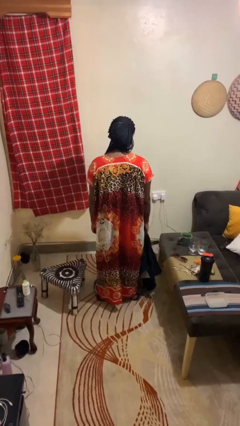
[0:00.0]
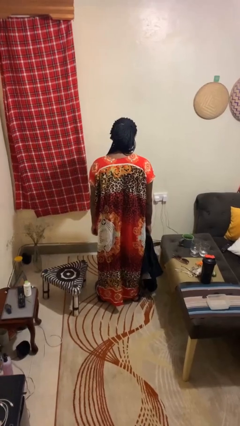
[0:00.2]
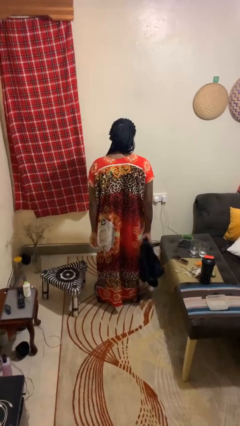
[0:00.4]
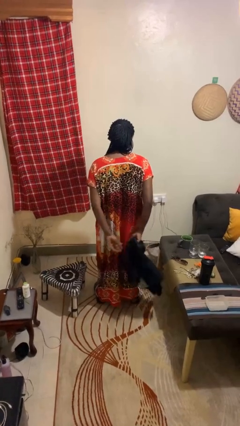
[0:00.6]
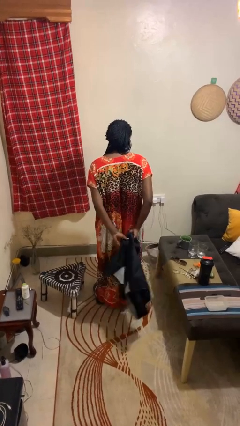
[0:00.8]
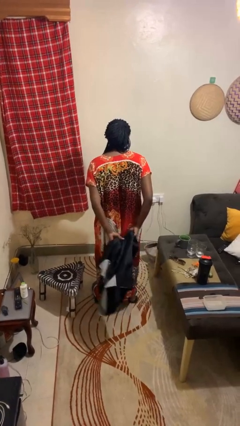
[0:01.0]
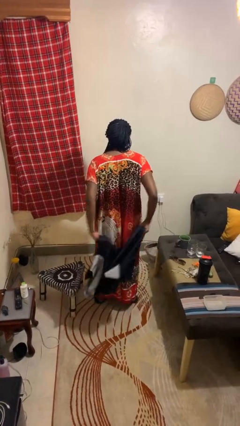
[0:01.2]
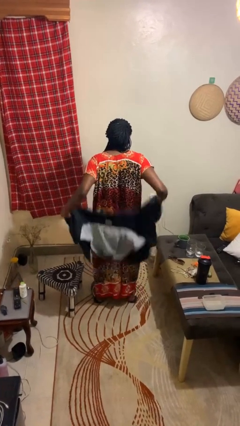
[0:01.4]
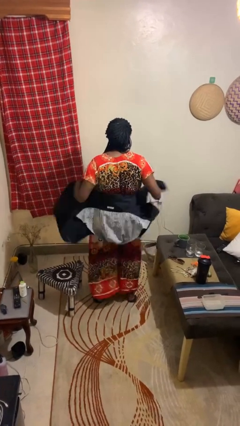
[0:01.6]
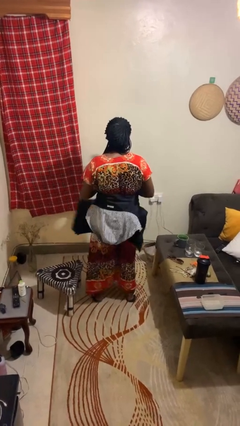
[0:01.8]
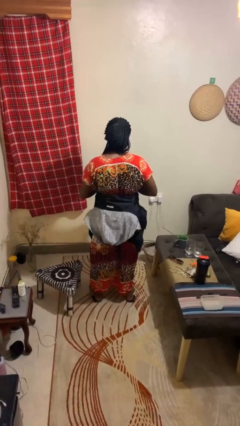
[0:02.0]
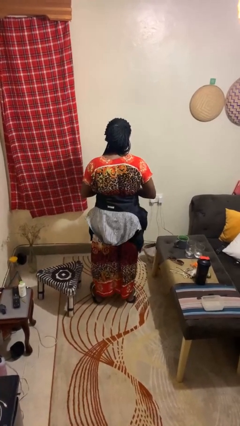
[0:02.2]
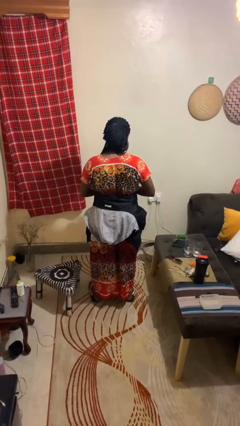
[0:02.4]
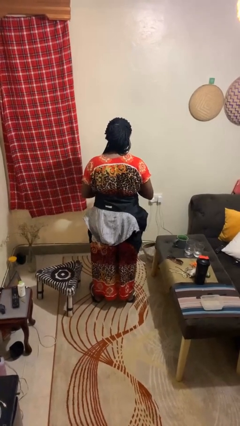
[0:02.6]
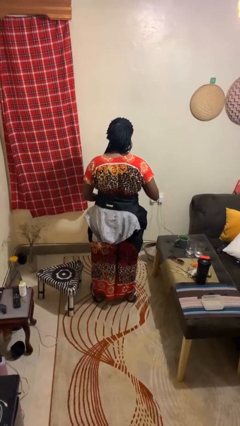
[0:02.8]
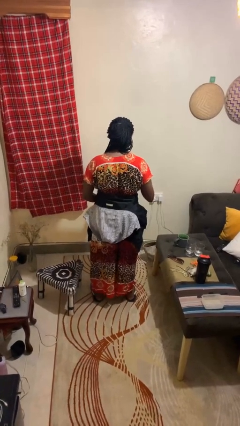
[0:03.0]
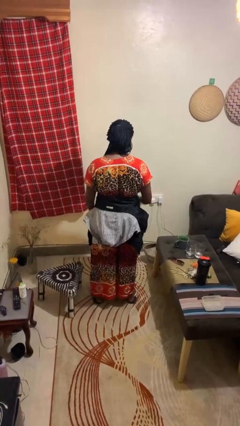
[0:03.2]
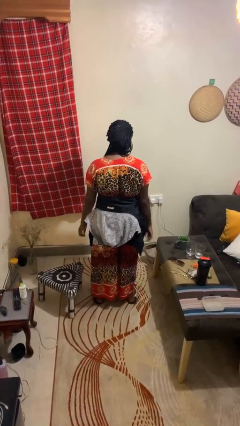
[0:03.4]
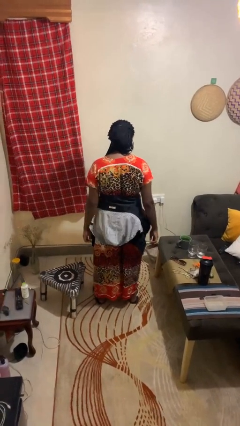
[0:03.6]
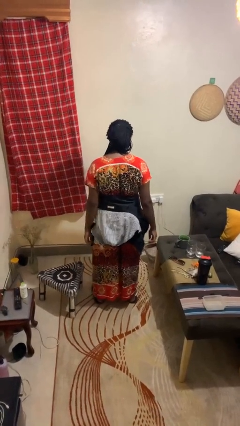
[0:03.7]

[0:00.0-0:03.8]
person ties jacket around waist

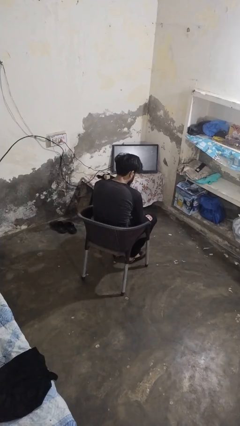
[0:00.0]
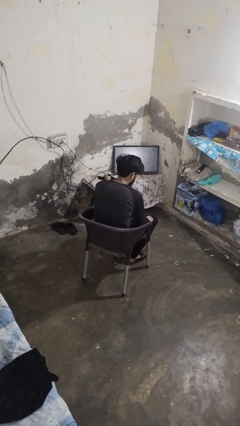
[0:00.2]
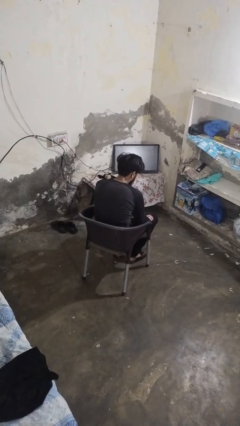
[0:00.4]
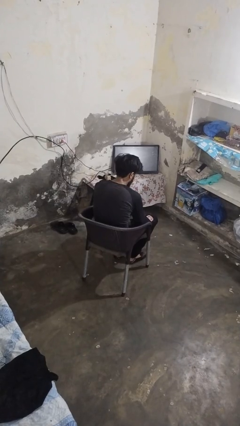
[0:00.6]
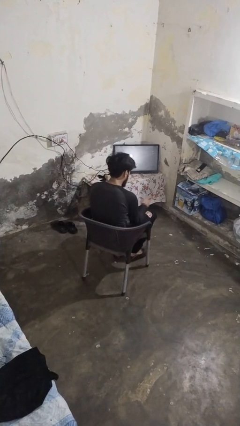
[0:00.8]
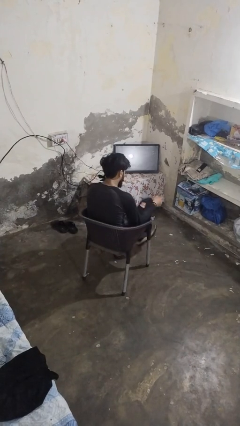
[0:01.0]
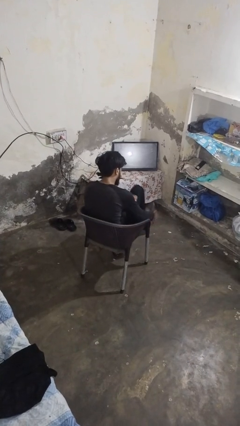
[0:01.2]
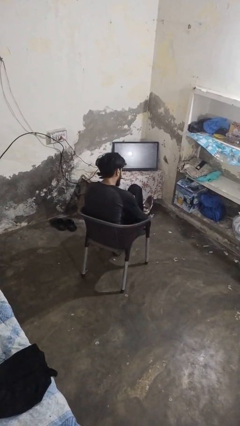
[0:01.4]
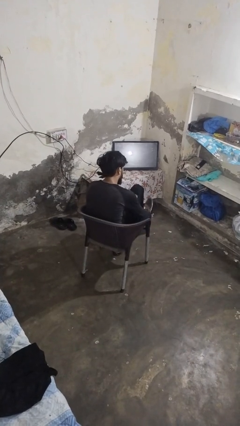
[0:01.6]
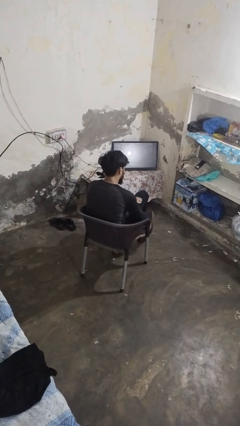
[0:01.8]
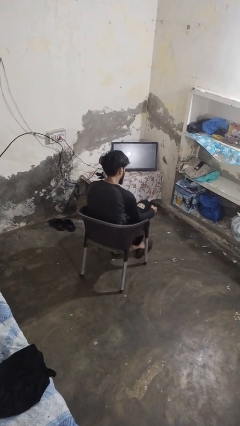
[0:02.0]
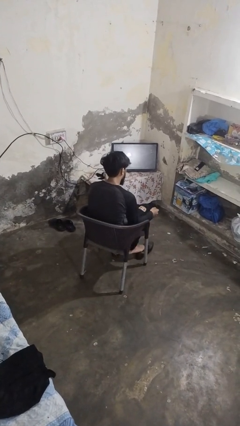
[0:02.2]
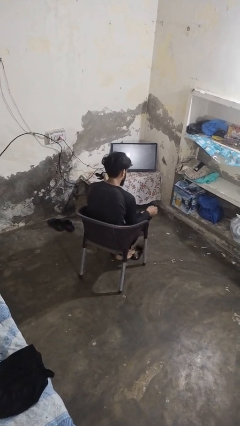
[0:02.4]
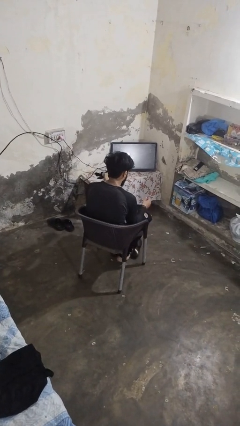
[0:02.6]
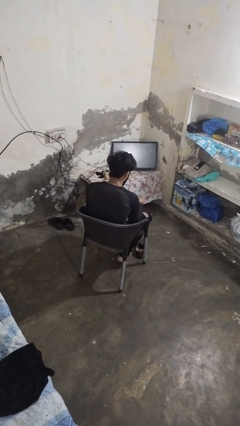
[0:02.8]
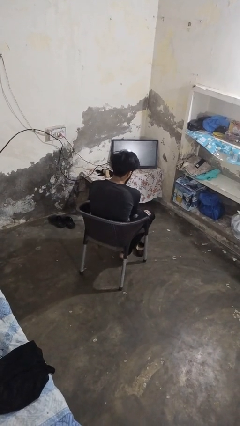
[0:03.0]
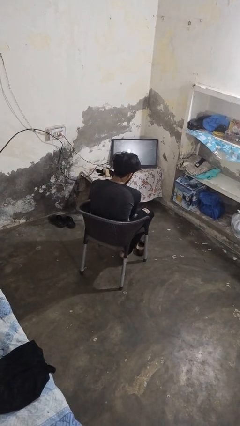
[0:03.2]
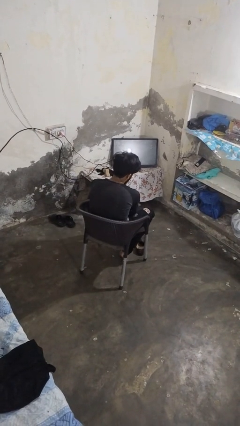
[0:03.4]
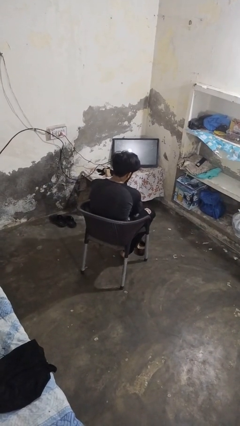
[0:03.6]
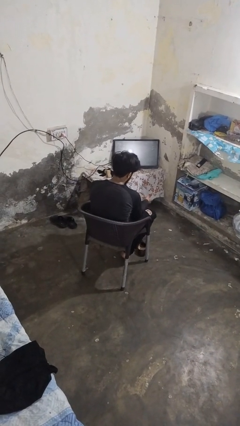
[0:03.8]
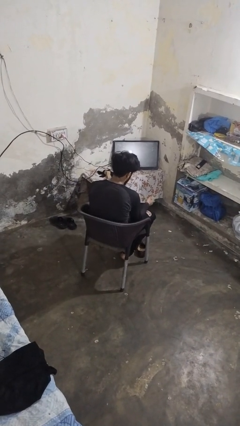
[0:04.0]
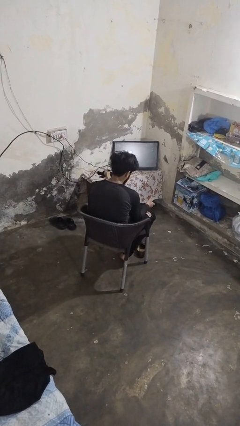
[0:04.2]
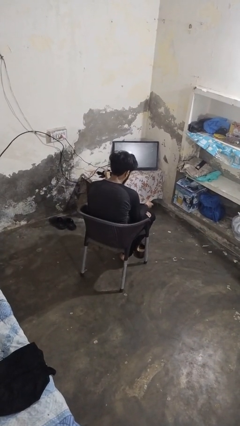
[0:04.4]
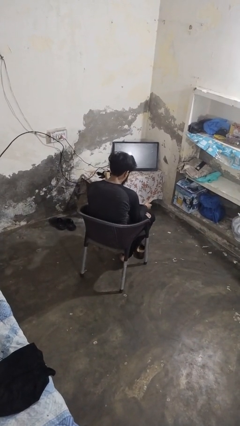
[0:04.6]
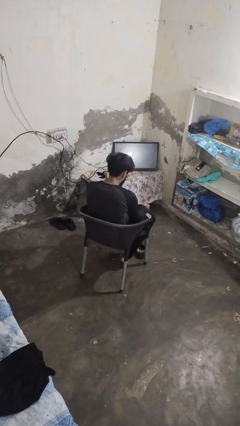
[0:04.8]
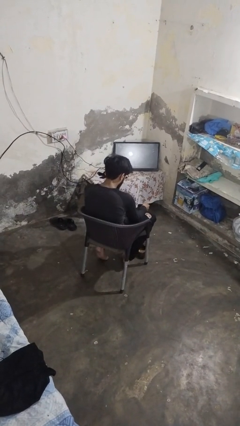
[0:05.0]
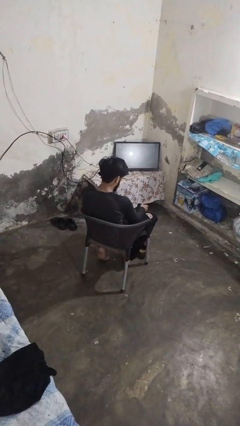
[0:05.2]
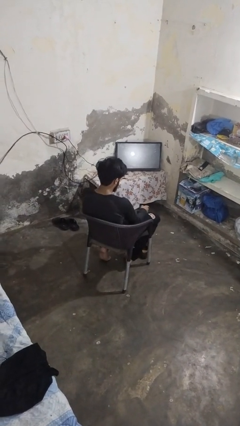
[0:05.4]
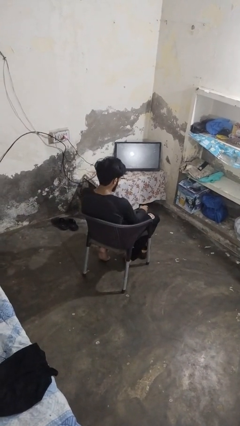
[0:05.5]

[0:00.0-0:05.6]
person takes off shoes

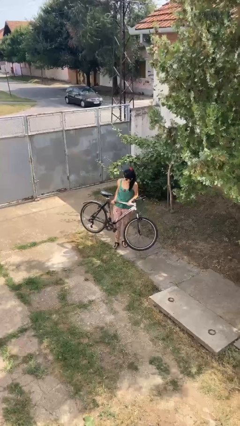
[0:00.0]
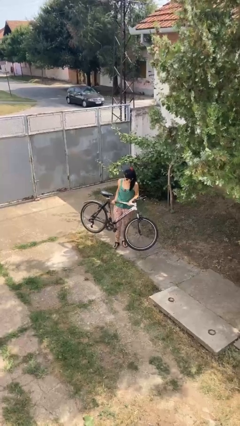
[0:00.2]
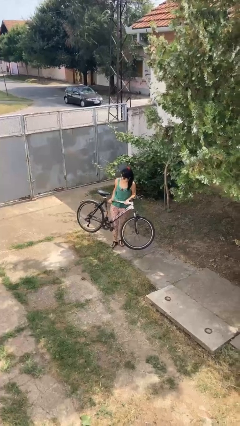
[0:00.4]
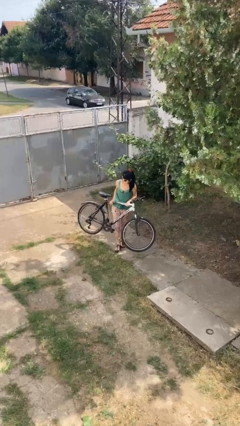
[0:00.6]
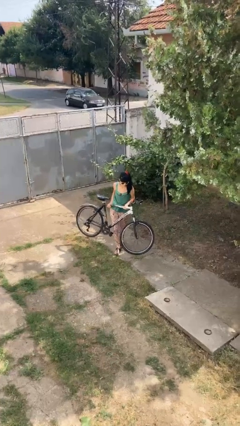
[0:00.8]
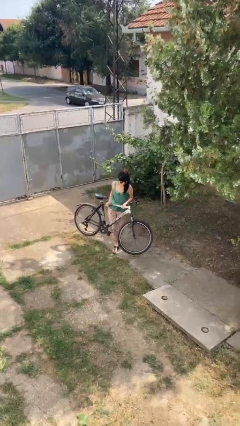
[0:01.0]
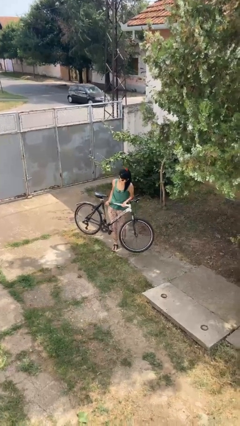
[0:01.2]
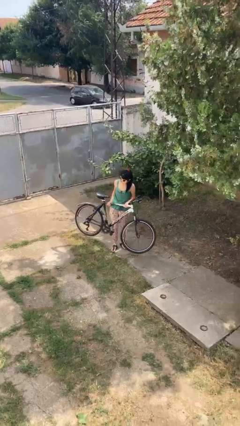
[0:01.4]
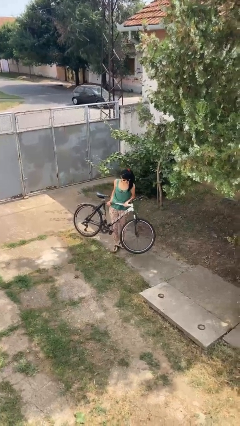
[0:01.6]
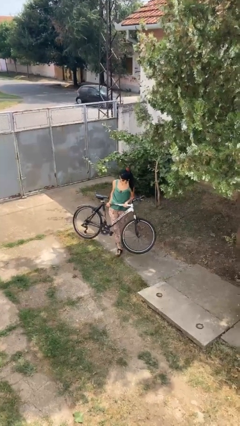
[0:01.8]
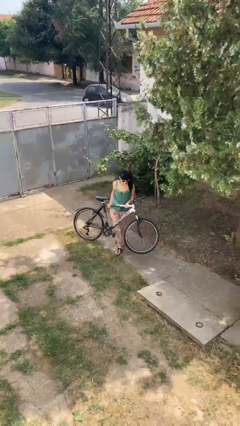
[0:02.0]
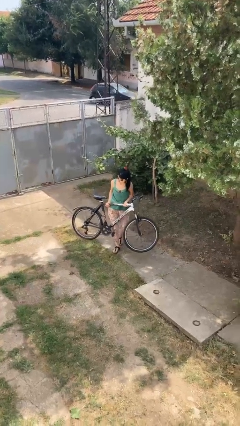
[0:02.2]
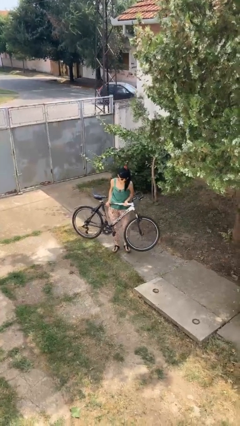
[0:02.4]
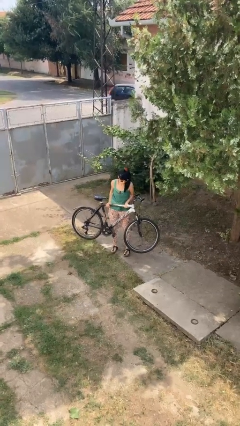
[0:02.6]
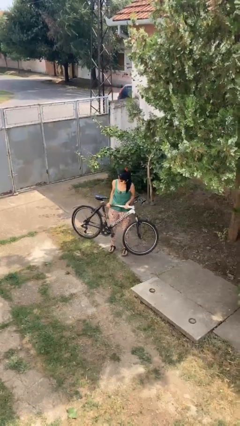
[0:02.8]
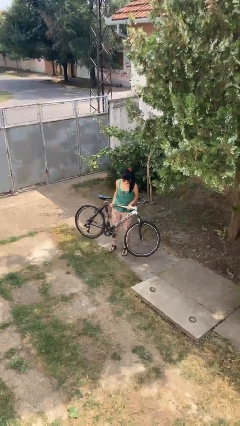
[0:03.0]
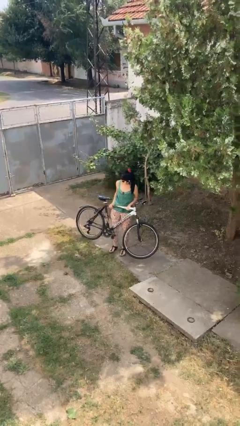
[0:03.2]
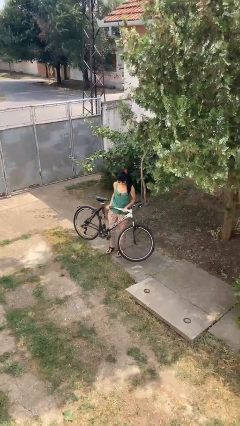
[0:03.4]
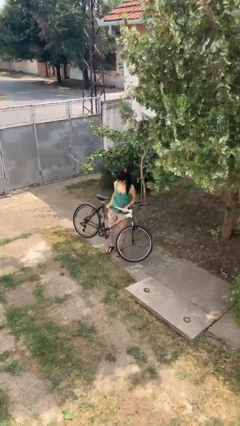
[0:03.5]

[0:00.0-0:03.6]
person carries bicycle

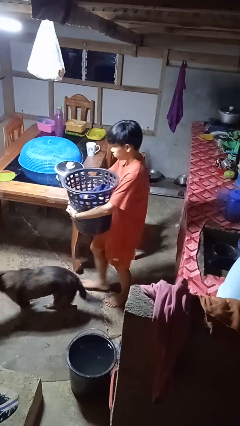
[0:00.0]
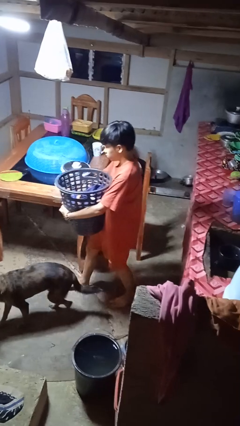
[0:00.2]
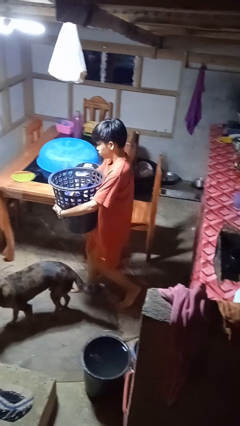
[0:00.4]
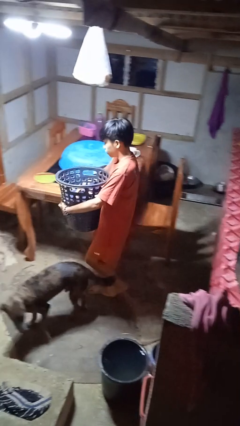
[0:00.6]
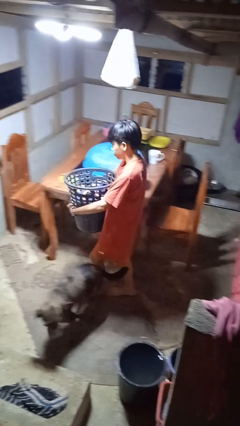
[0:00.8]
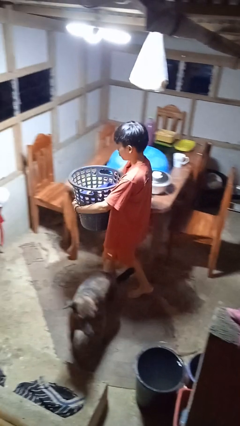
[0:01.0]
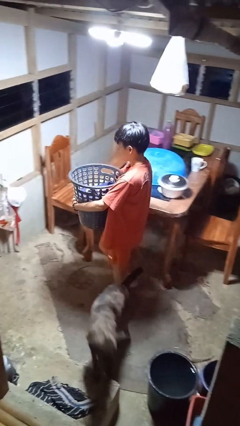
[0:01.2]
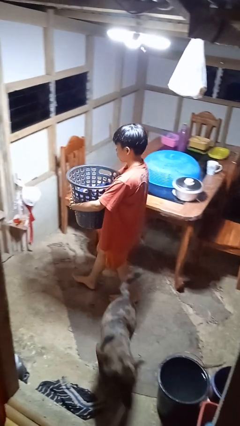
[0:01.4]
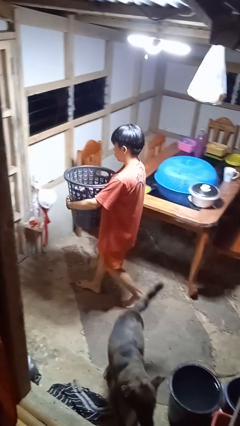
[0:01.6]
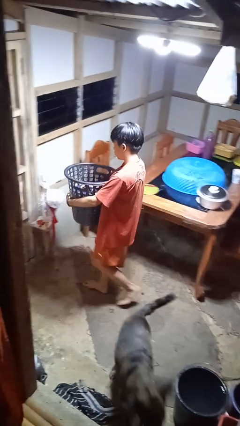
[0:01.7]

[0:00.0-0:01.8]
person carries laundry basket

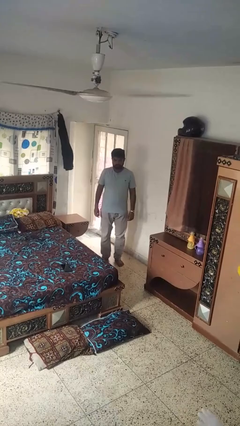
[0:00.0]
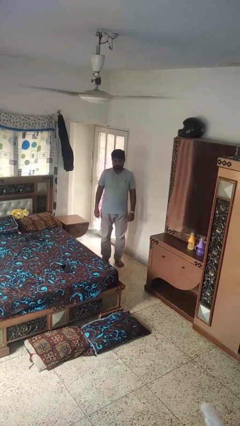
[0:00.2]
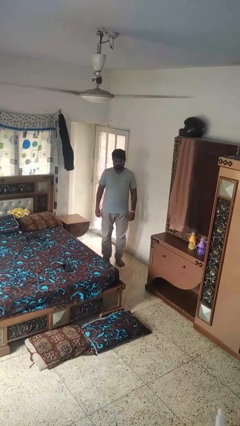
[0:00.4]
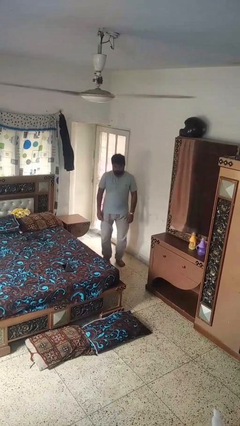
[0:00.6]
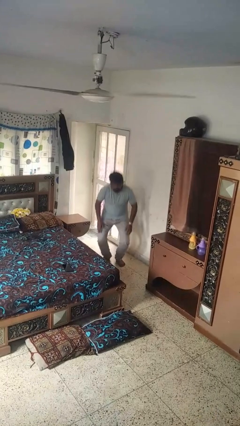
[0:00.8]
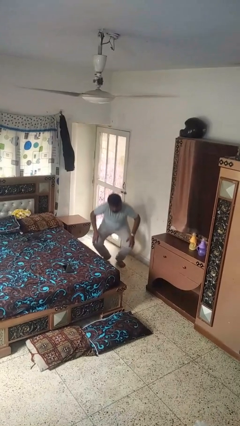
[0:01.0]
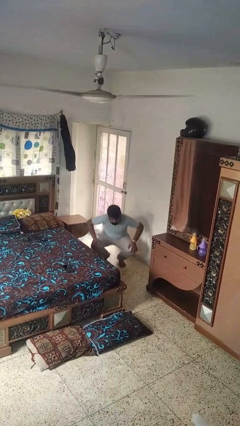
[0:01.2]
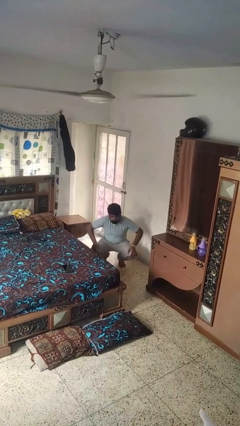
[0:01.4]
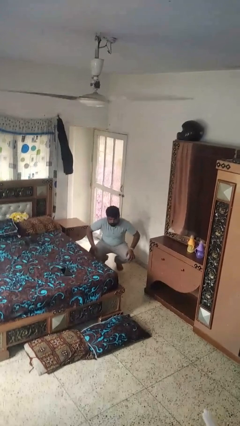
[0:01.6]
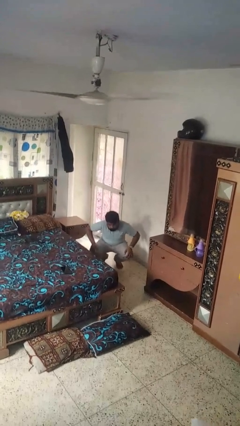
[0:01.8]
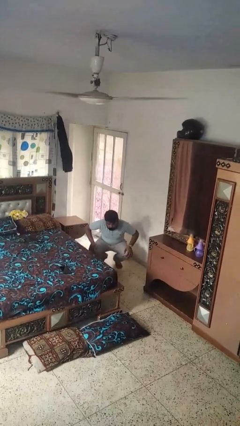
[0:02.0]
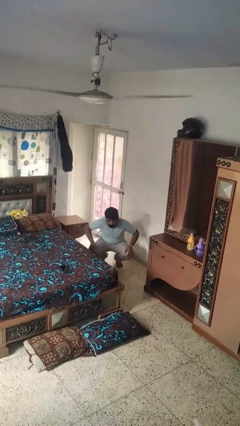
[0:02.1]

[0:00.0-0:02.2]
person squats

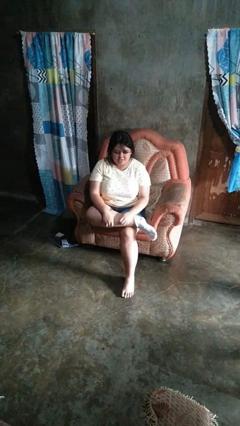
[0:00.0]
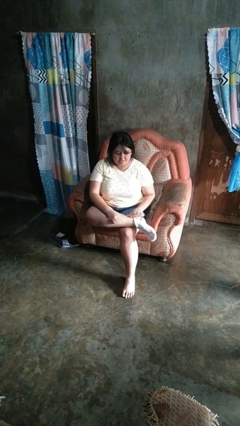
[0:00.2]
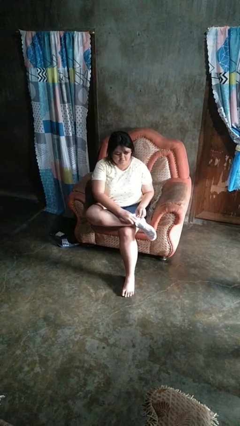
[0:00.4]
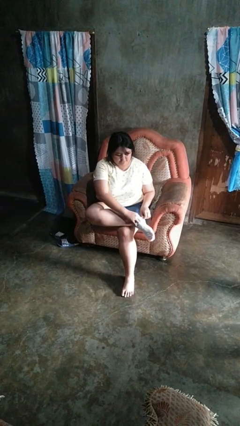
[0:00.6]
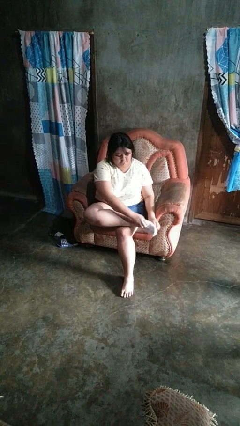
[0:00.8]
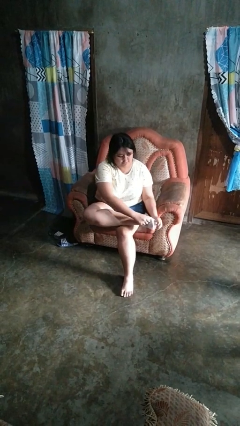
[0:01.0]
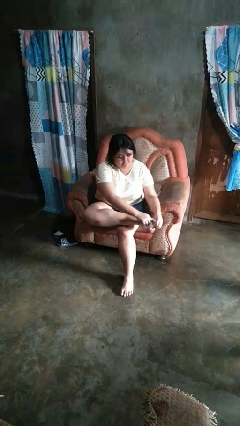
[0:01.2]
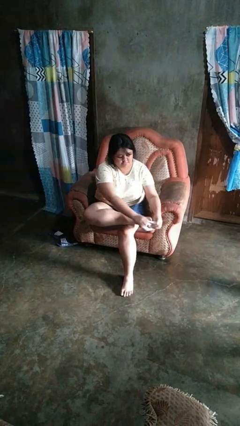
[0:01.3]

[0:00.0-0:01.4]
person takes off socks
